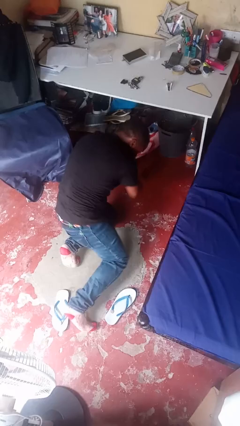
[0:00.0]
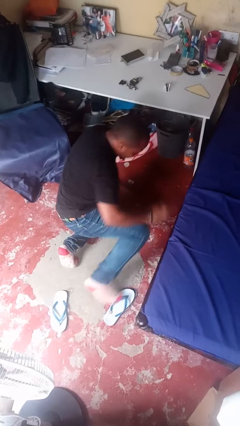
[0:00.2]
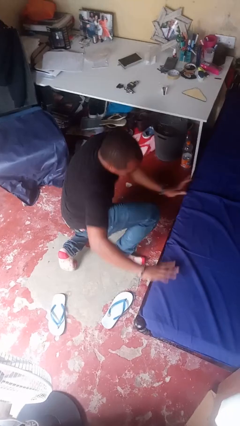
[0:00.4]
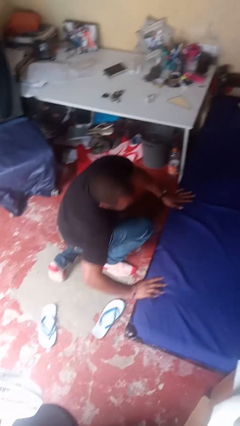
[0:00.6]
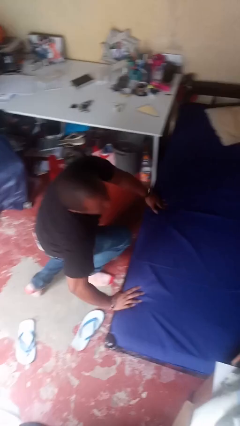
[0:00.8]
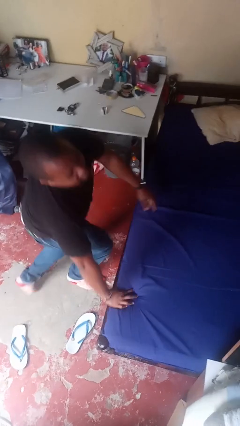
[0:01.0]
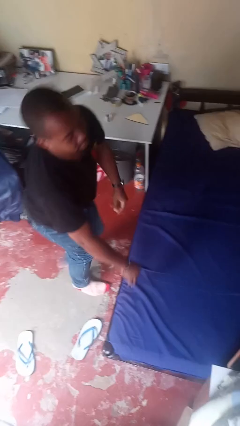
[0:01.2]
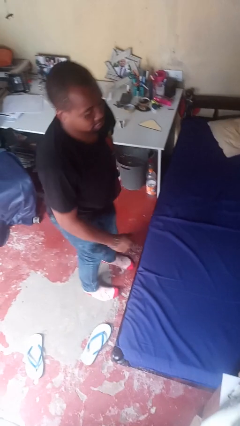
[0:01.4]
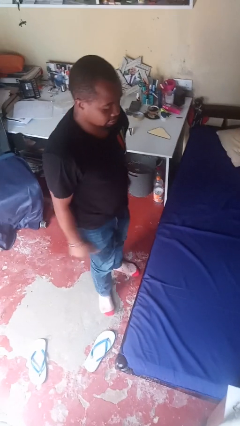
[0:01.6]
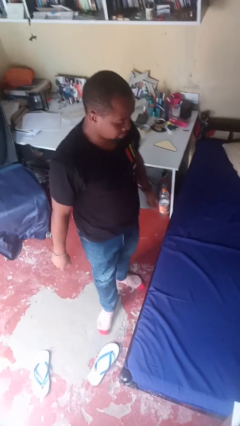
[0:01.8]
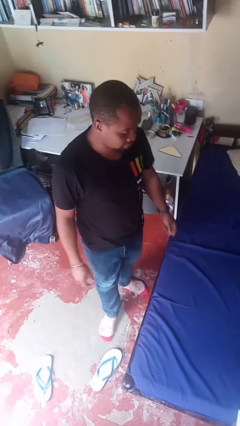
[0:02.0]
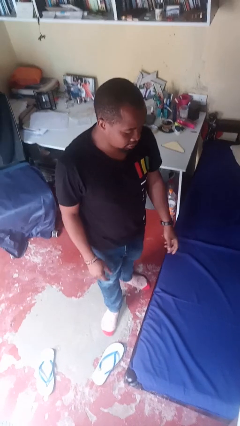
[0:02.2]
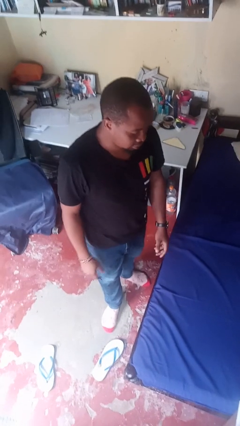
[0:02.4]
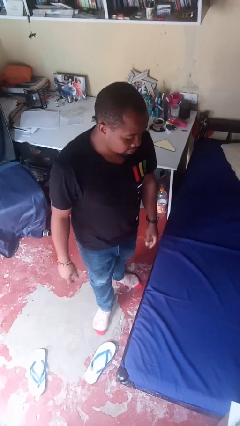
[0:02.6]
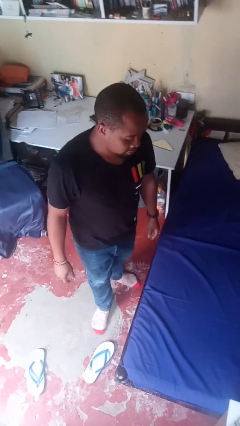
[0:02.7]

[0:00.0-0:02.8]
person stands up from floor

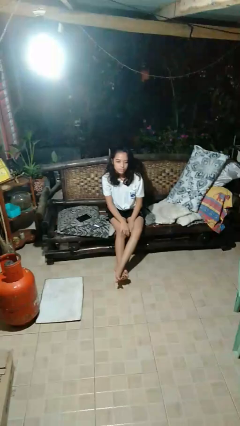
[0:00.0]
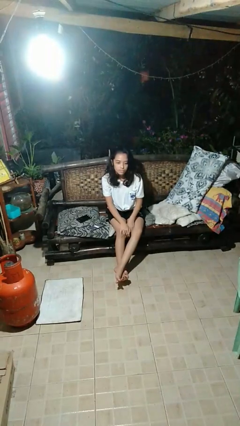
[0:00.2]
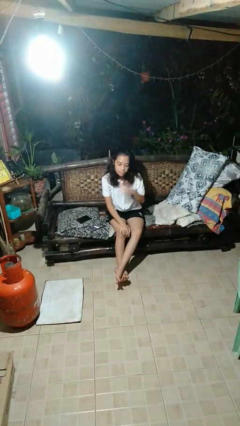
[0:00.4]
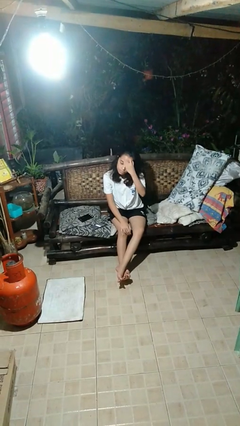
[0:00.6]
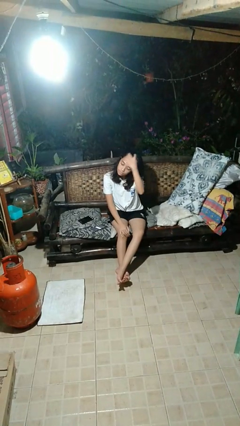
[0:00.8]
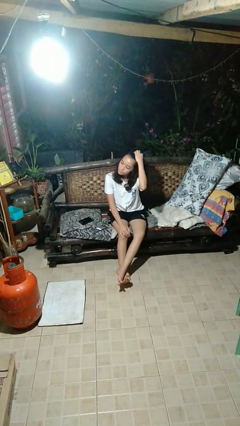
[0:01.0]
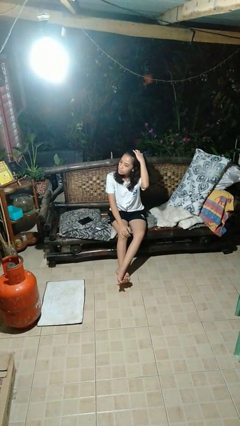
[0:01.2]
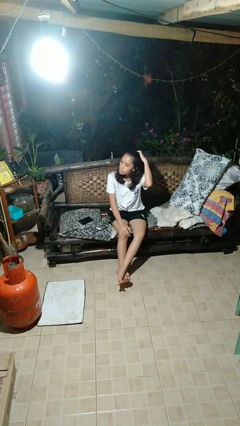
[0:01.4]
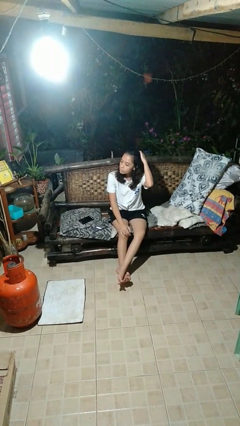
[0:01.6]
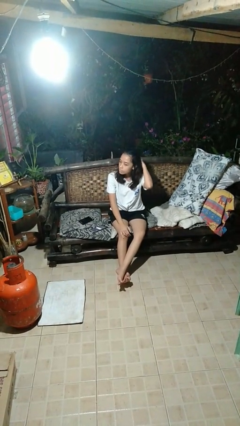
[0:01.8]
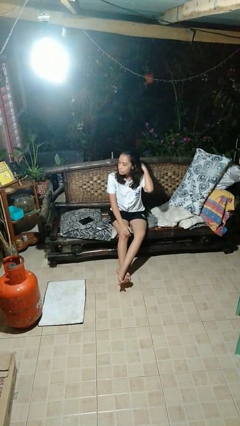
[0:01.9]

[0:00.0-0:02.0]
person strokes hair

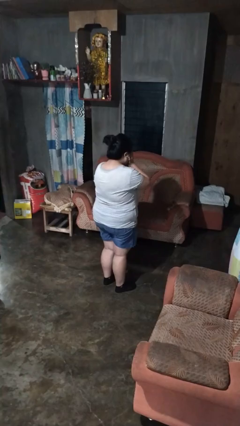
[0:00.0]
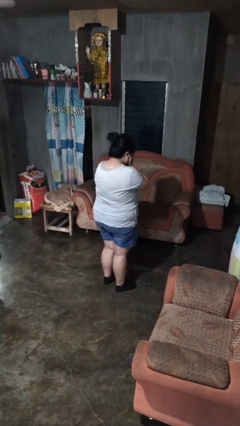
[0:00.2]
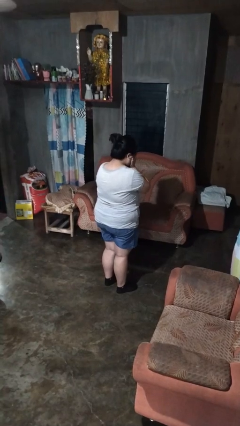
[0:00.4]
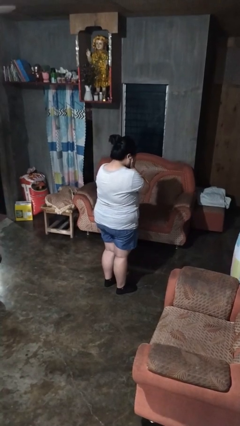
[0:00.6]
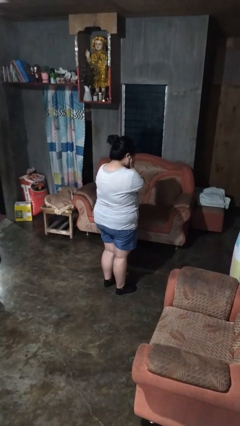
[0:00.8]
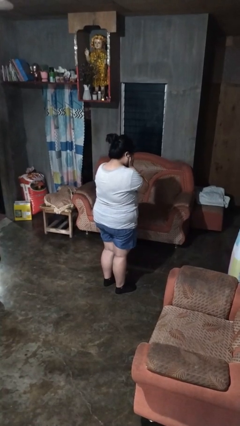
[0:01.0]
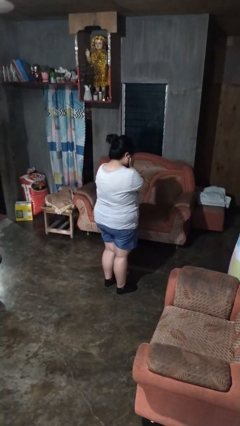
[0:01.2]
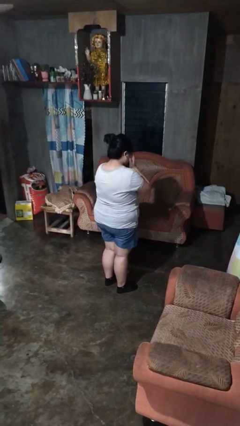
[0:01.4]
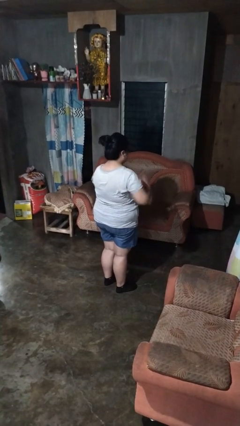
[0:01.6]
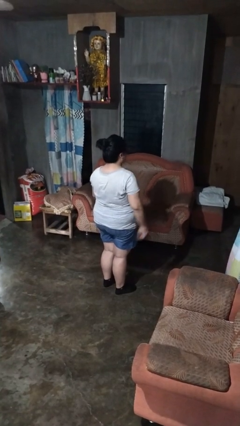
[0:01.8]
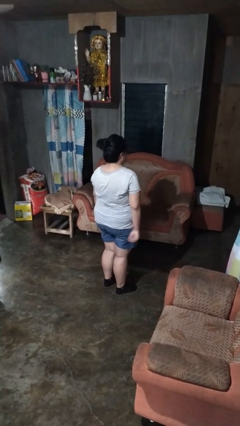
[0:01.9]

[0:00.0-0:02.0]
person covers face with hands

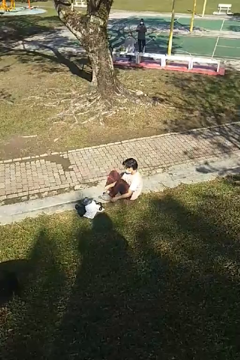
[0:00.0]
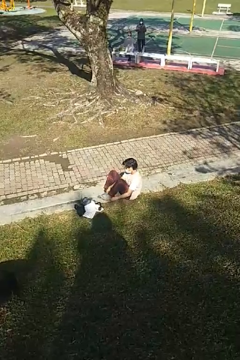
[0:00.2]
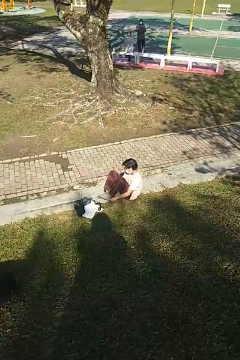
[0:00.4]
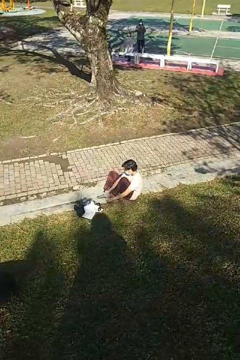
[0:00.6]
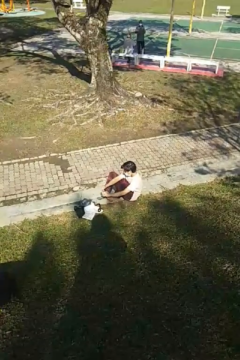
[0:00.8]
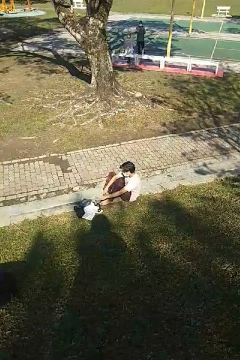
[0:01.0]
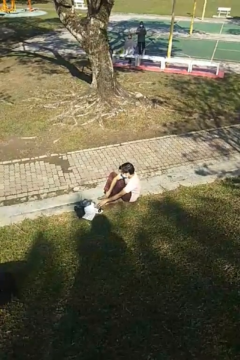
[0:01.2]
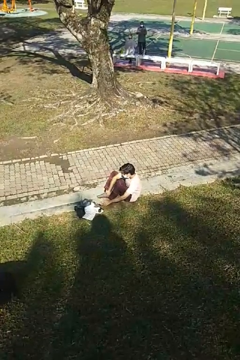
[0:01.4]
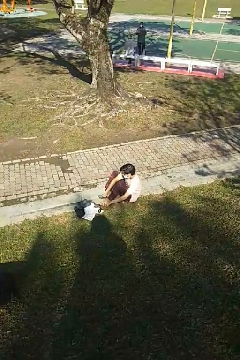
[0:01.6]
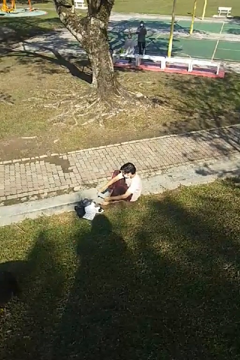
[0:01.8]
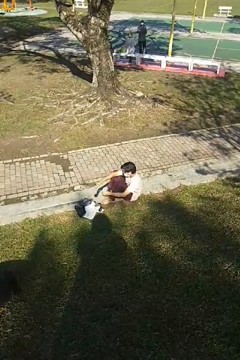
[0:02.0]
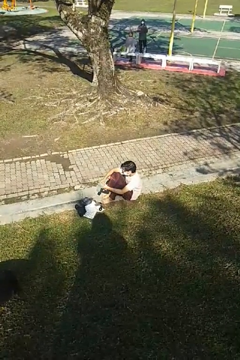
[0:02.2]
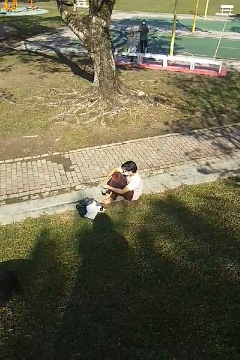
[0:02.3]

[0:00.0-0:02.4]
person takes off socks

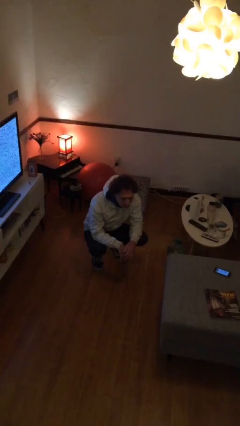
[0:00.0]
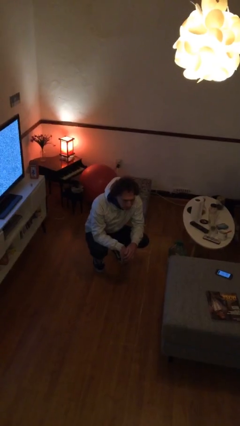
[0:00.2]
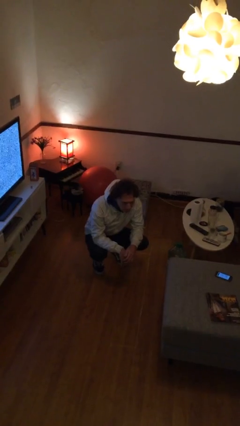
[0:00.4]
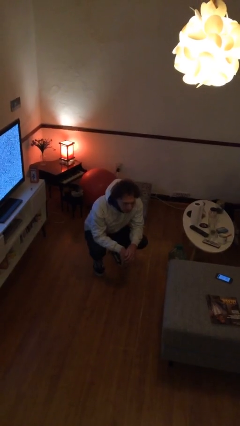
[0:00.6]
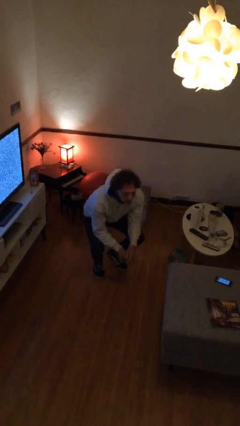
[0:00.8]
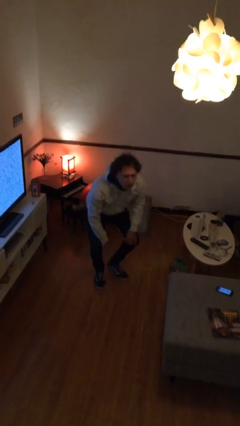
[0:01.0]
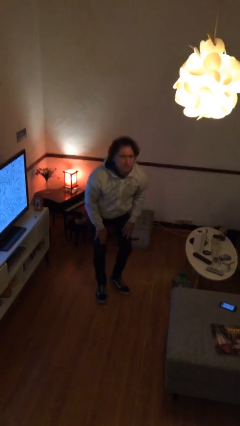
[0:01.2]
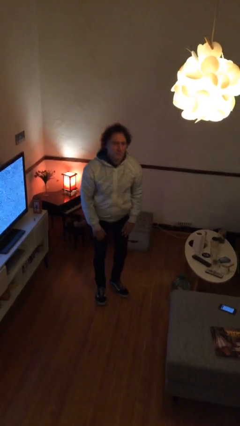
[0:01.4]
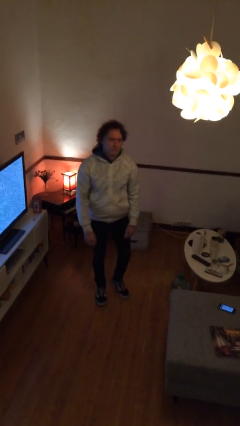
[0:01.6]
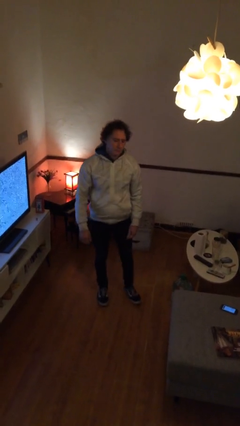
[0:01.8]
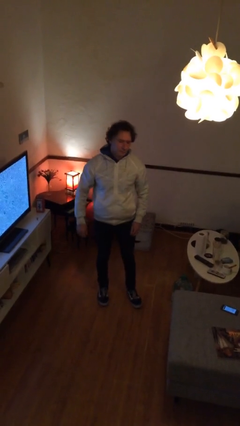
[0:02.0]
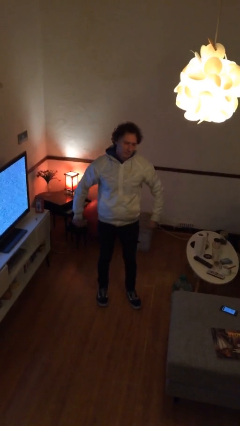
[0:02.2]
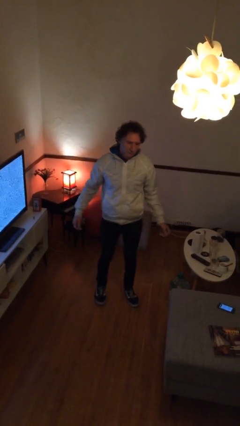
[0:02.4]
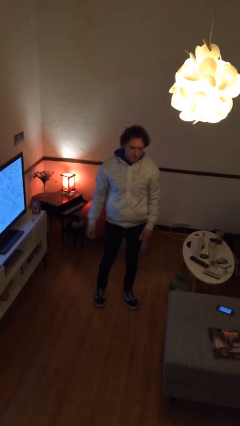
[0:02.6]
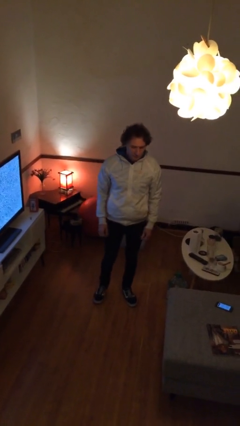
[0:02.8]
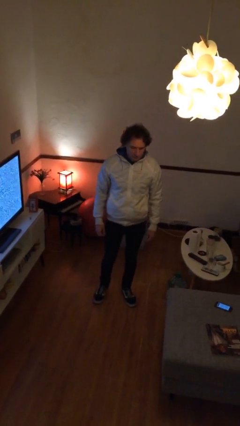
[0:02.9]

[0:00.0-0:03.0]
person stands up

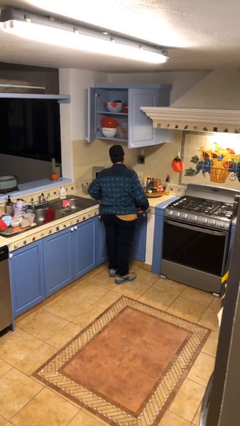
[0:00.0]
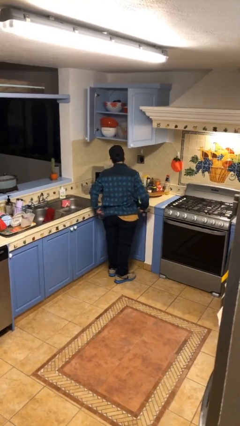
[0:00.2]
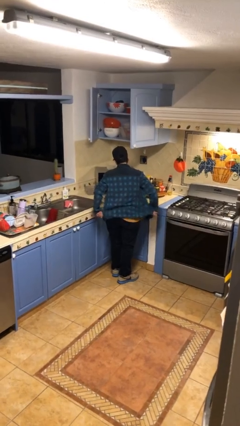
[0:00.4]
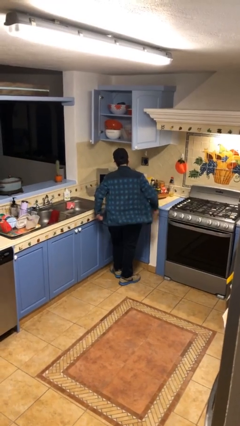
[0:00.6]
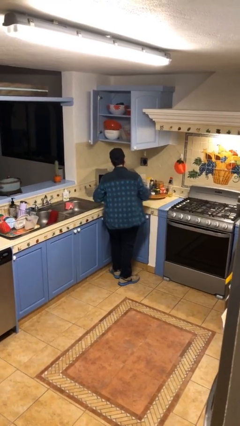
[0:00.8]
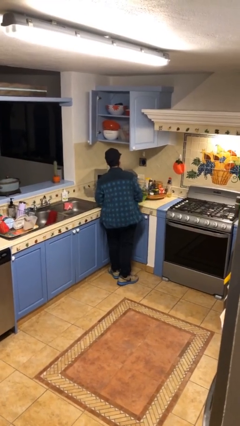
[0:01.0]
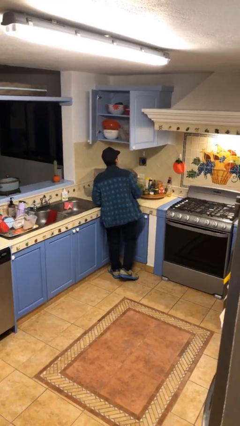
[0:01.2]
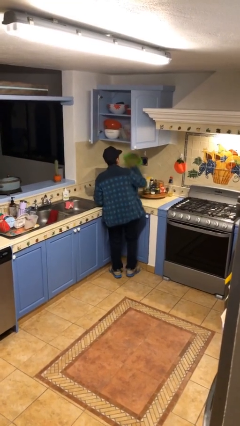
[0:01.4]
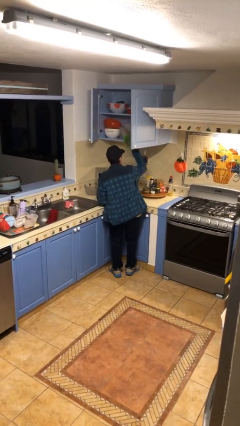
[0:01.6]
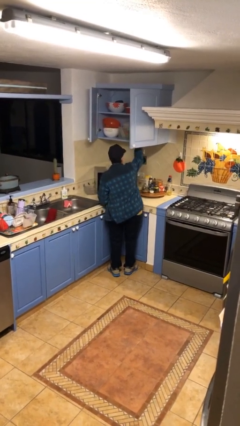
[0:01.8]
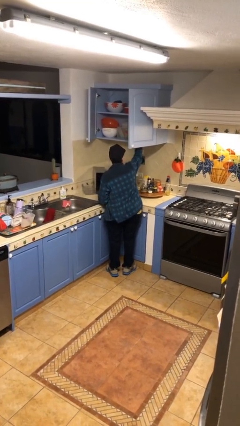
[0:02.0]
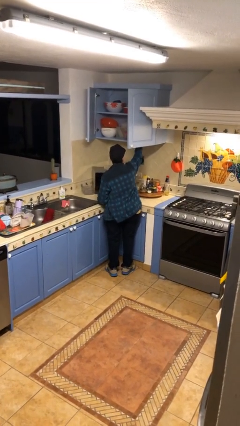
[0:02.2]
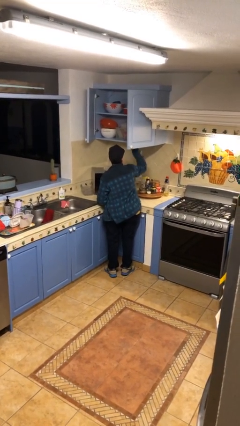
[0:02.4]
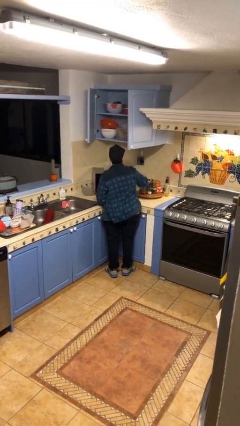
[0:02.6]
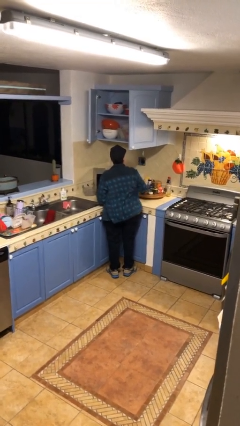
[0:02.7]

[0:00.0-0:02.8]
person puts object in cabinet

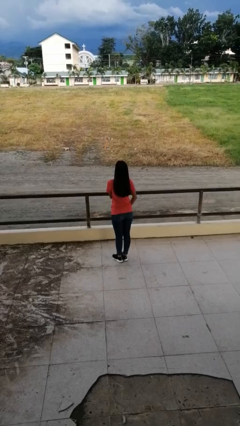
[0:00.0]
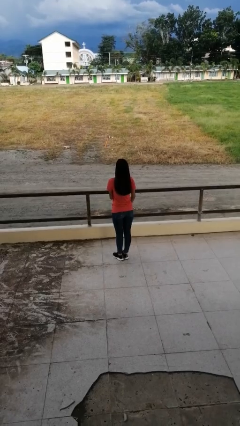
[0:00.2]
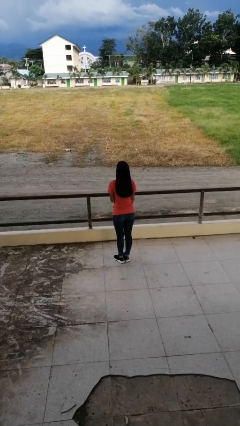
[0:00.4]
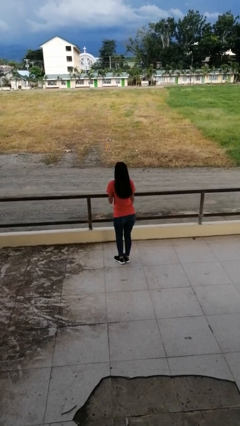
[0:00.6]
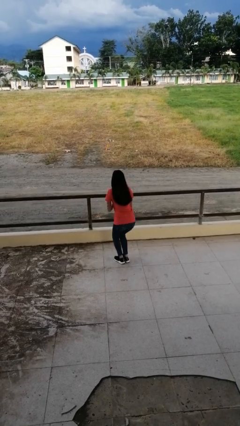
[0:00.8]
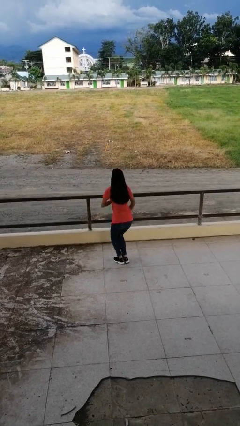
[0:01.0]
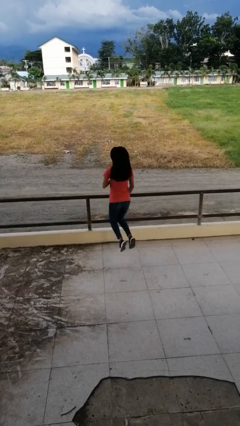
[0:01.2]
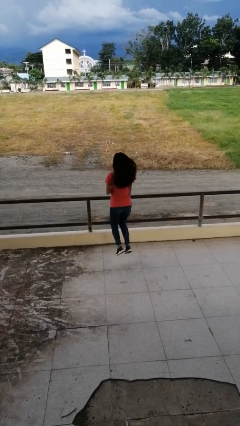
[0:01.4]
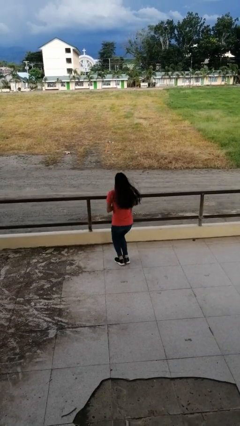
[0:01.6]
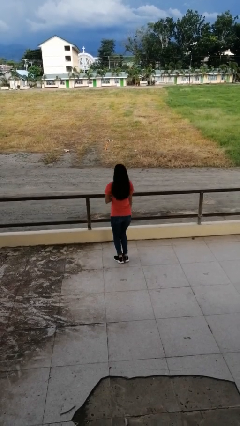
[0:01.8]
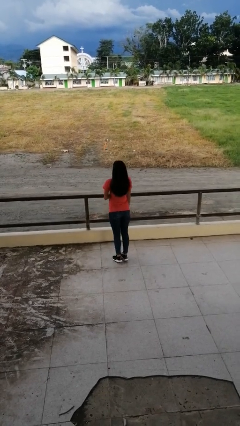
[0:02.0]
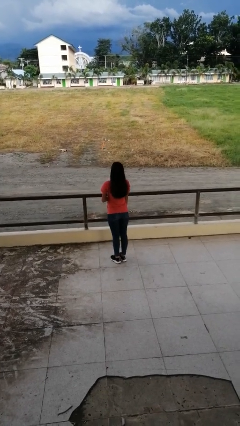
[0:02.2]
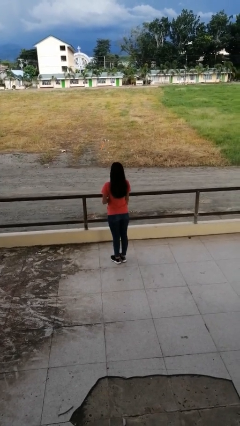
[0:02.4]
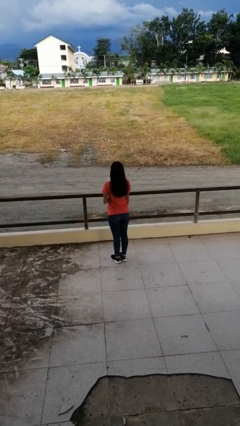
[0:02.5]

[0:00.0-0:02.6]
person jumps

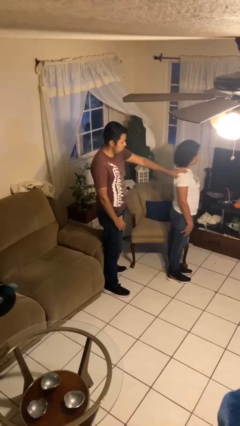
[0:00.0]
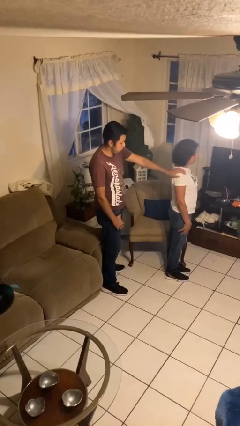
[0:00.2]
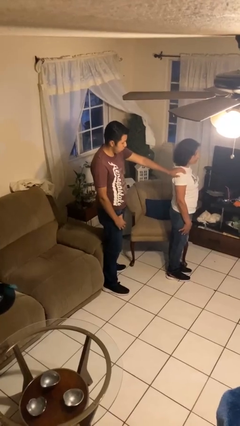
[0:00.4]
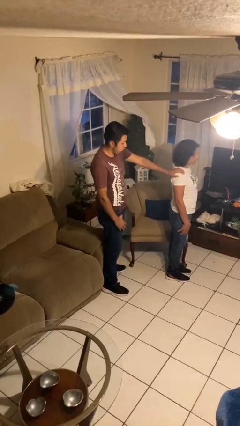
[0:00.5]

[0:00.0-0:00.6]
person grabs person by shoulder
